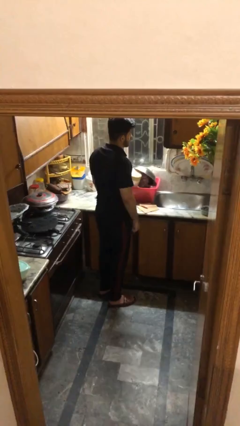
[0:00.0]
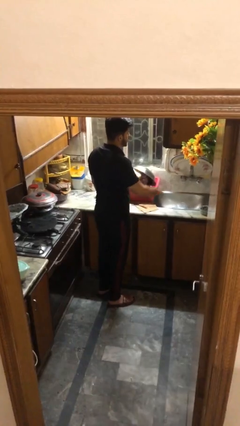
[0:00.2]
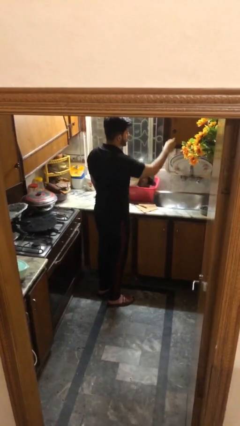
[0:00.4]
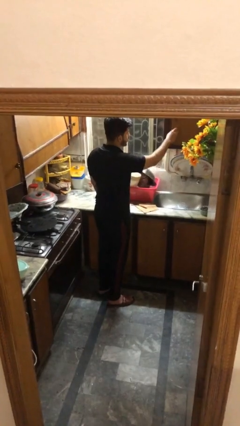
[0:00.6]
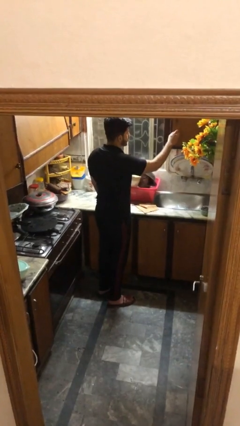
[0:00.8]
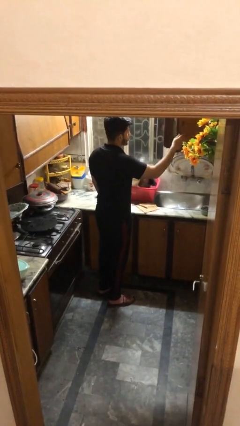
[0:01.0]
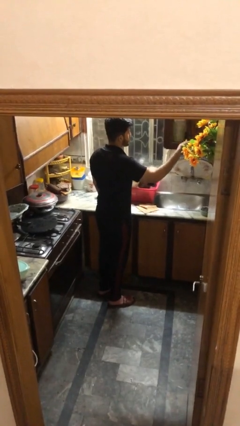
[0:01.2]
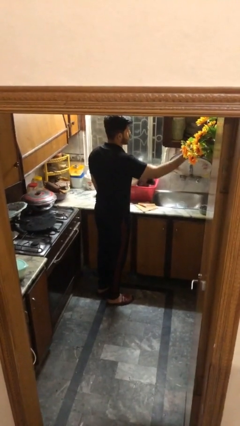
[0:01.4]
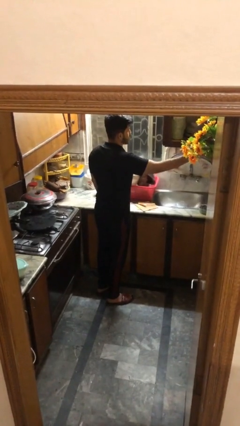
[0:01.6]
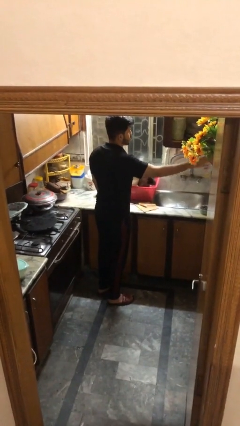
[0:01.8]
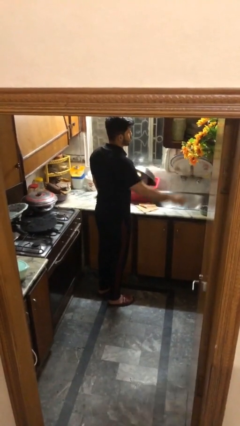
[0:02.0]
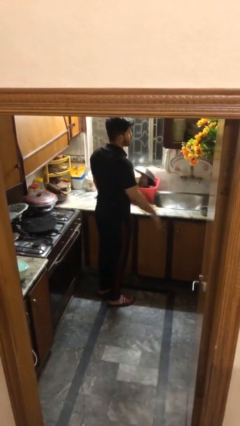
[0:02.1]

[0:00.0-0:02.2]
person opens kitchen drawer

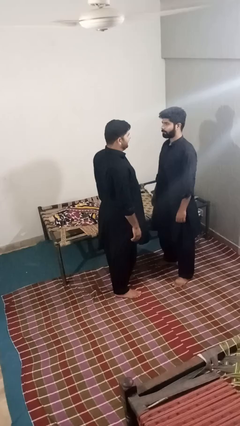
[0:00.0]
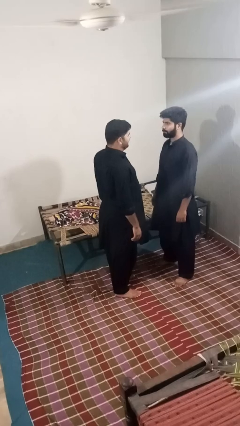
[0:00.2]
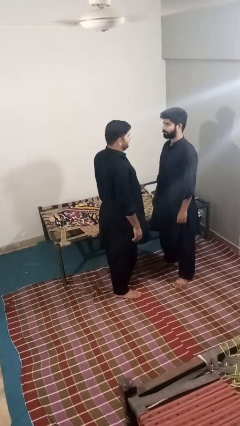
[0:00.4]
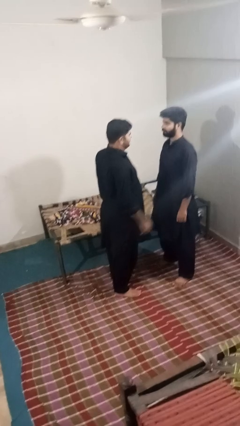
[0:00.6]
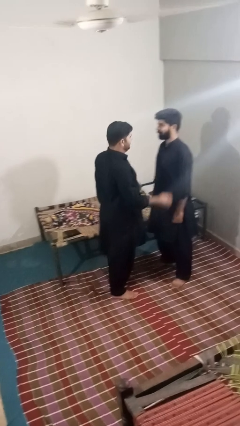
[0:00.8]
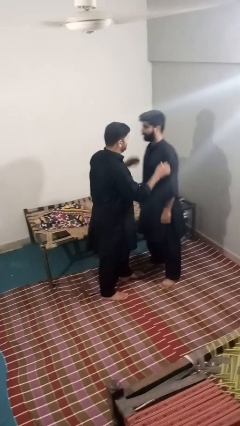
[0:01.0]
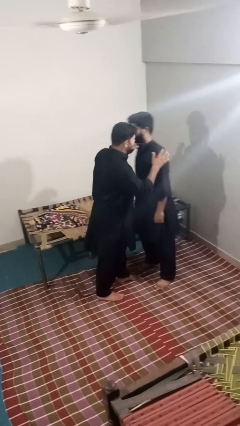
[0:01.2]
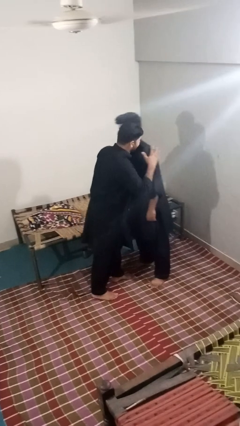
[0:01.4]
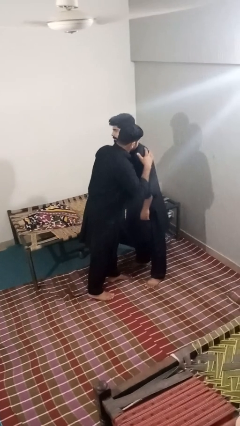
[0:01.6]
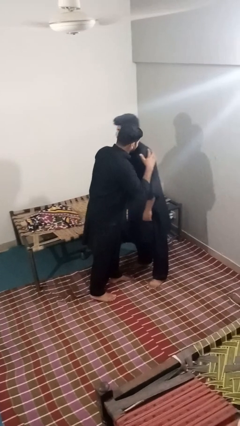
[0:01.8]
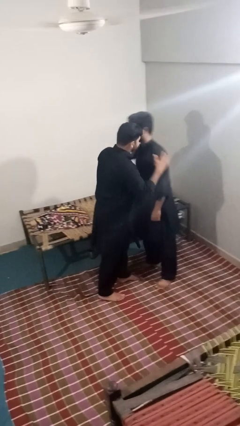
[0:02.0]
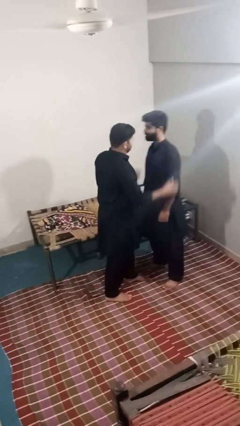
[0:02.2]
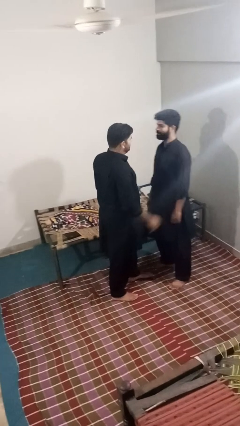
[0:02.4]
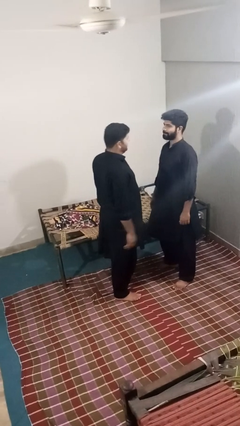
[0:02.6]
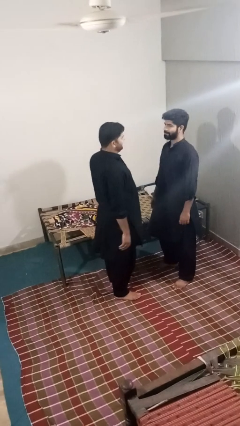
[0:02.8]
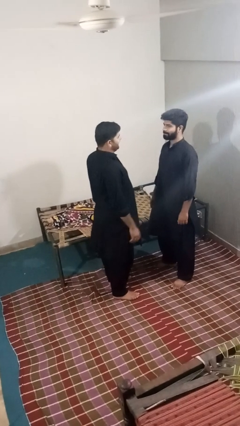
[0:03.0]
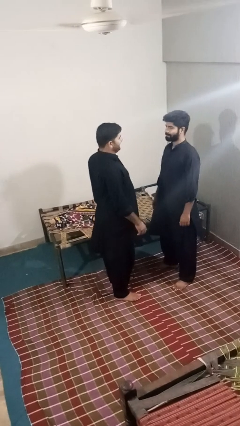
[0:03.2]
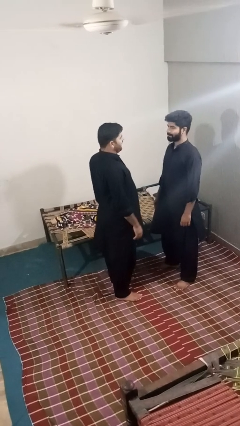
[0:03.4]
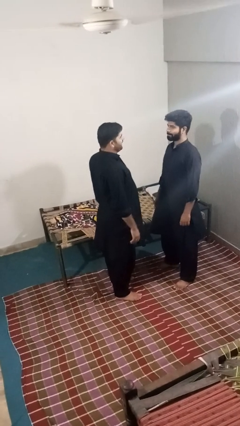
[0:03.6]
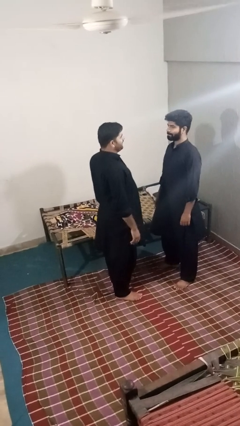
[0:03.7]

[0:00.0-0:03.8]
person kisses cheek of person

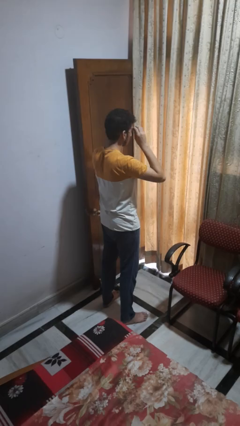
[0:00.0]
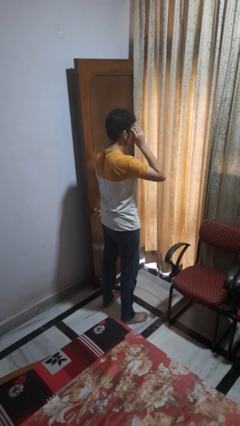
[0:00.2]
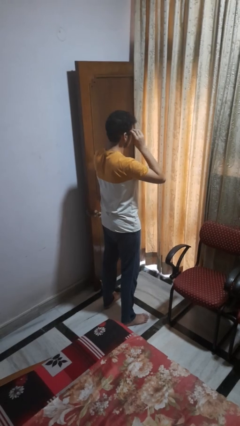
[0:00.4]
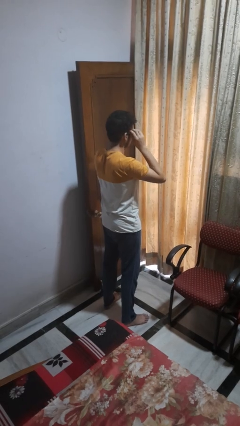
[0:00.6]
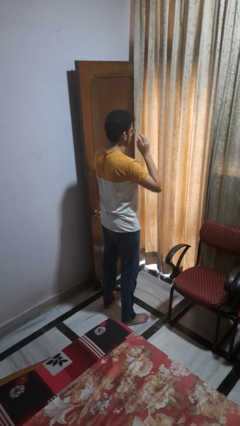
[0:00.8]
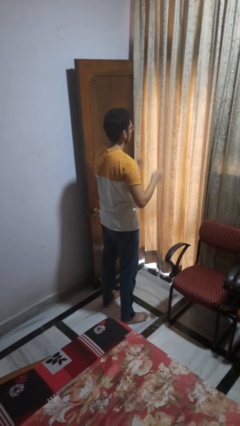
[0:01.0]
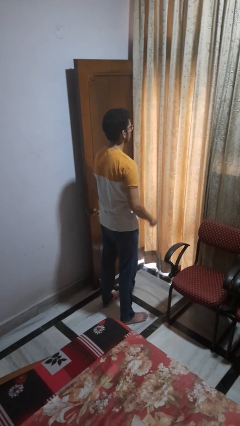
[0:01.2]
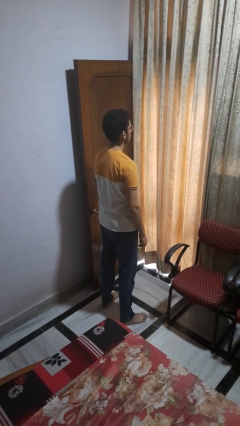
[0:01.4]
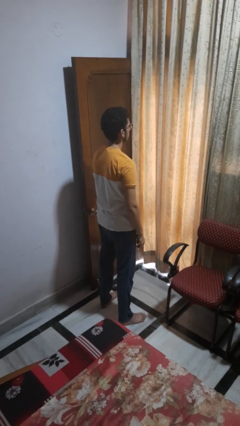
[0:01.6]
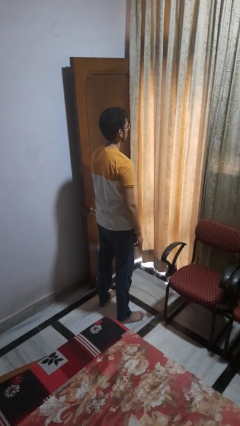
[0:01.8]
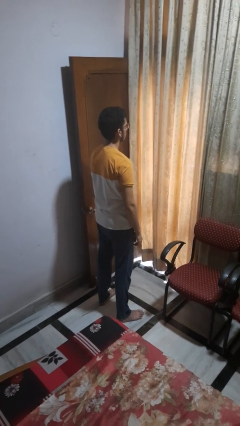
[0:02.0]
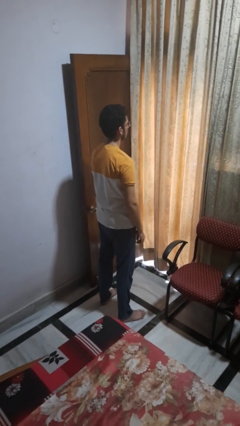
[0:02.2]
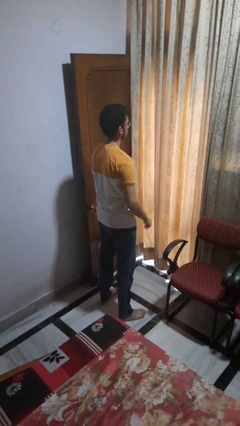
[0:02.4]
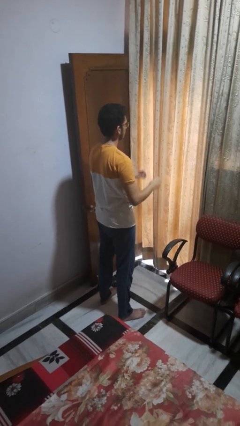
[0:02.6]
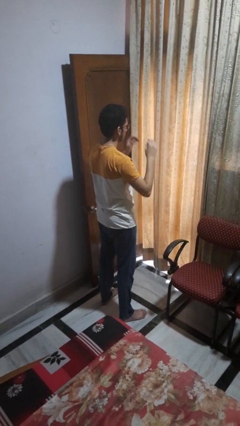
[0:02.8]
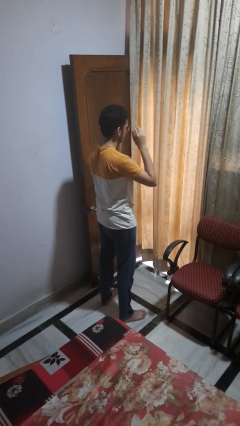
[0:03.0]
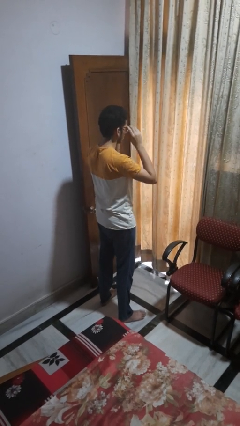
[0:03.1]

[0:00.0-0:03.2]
person puts on glasses

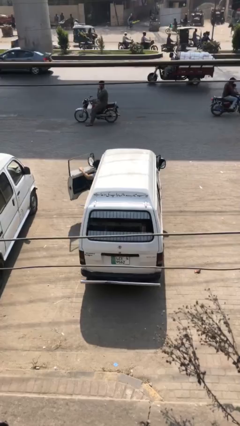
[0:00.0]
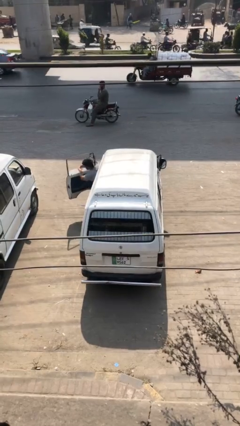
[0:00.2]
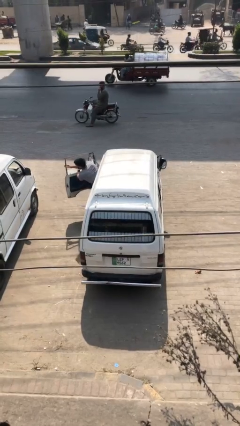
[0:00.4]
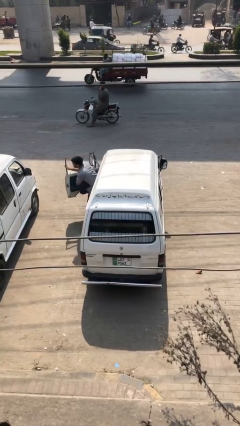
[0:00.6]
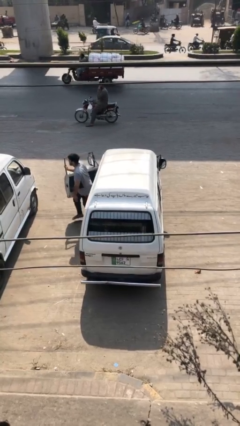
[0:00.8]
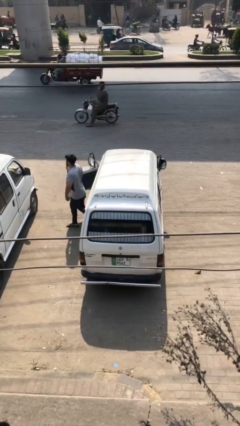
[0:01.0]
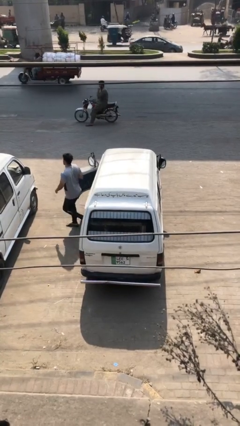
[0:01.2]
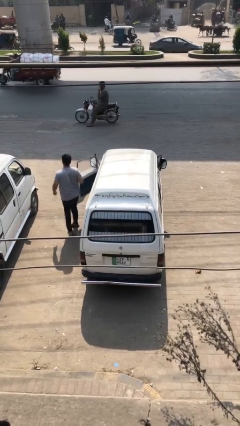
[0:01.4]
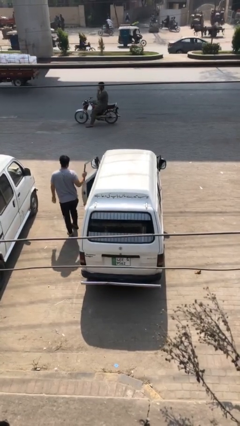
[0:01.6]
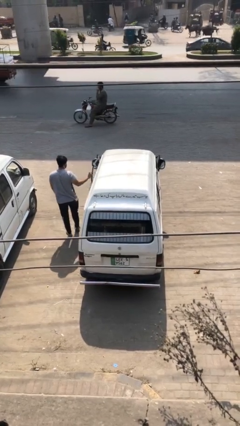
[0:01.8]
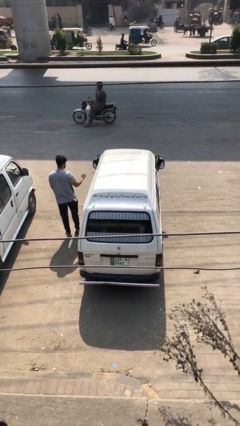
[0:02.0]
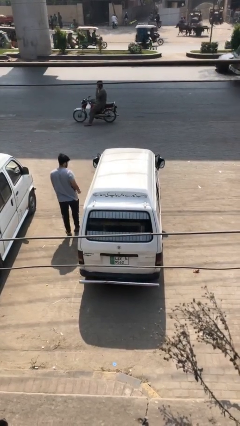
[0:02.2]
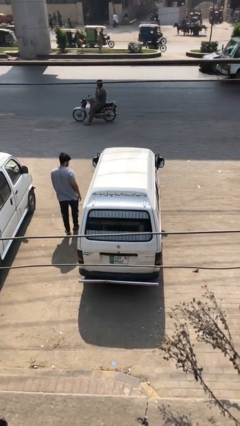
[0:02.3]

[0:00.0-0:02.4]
car drops off person

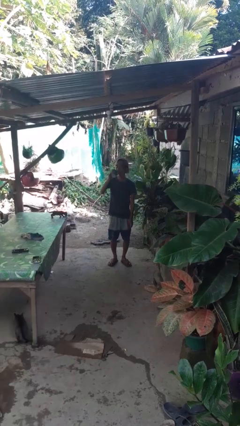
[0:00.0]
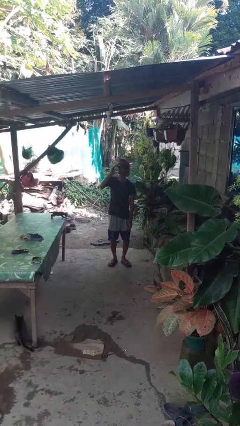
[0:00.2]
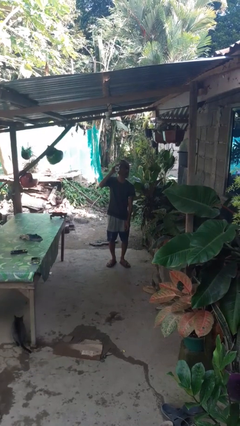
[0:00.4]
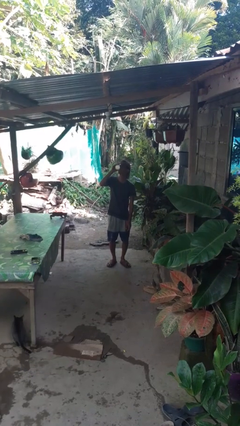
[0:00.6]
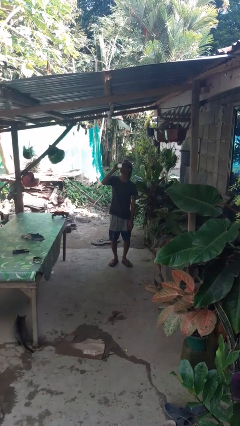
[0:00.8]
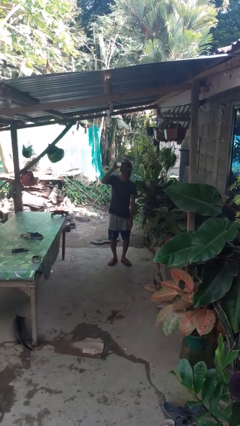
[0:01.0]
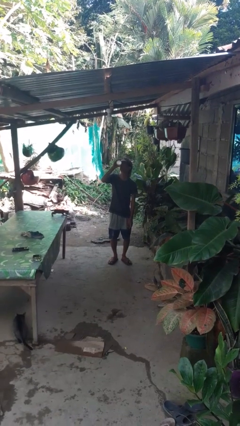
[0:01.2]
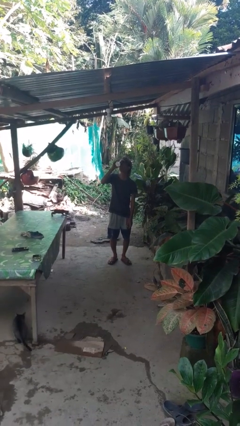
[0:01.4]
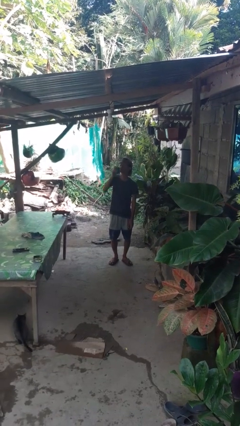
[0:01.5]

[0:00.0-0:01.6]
person drinks from beverage can

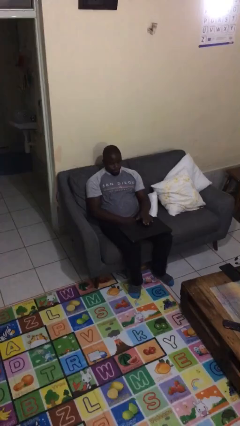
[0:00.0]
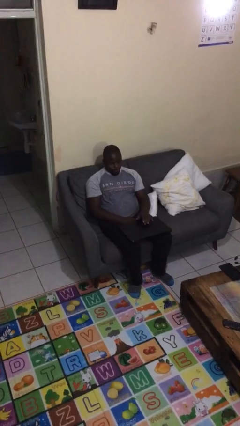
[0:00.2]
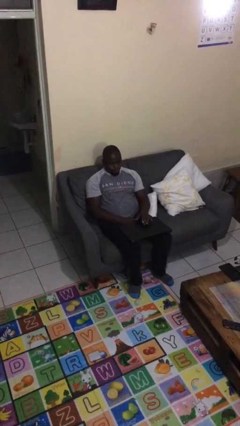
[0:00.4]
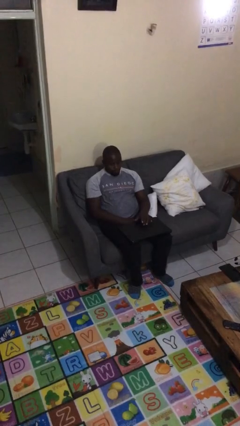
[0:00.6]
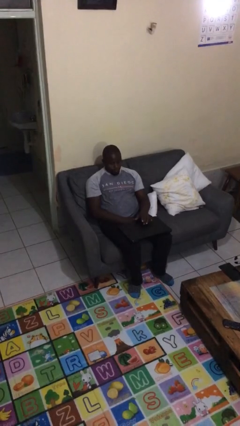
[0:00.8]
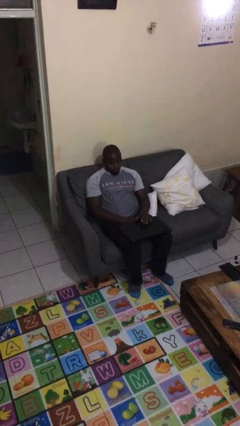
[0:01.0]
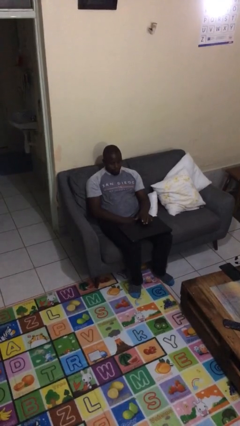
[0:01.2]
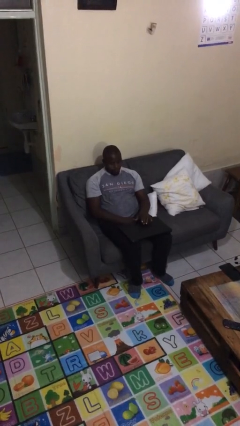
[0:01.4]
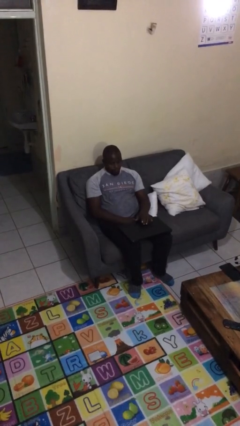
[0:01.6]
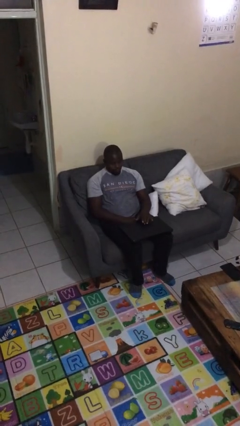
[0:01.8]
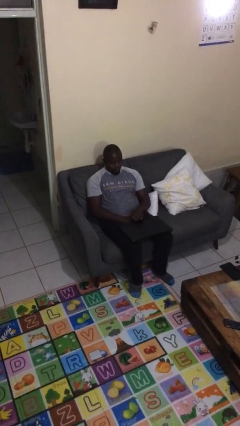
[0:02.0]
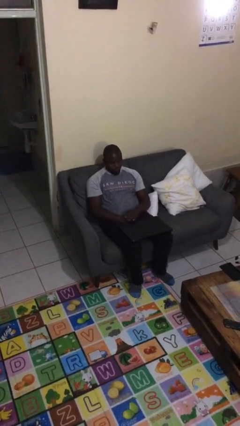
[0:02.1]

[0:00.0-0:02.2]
person taps object with finger

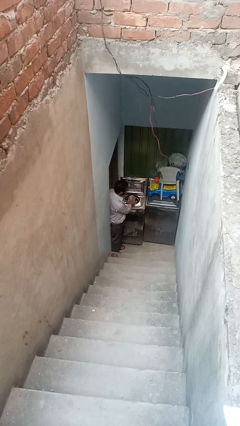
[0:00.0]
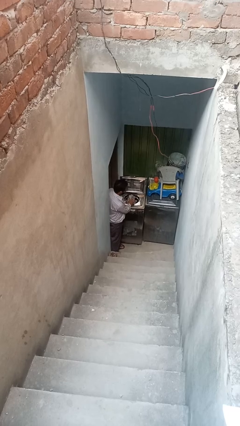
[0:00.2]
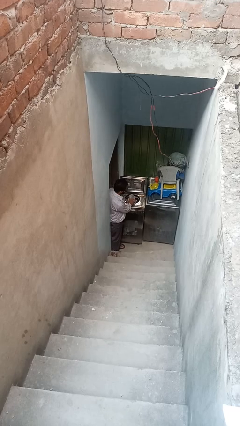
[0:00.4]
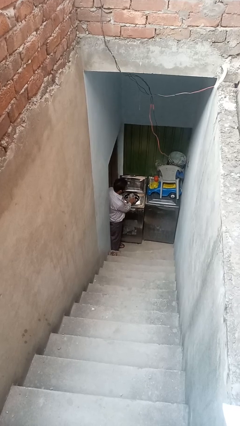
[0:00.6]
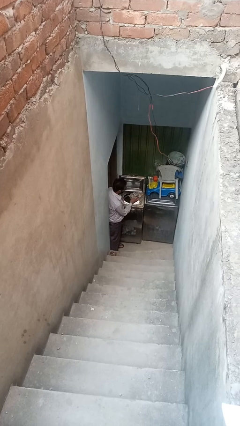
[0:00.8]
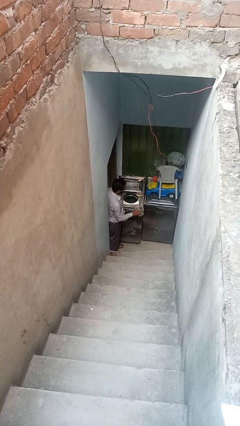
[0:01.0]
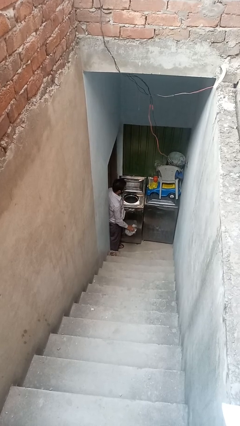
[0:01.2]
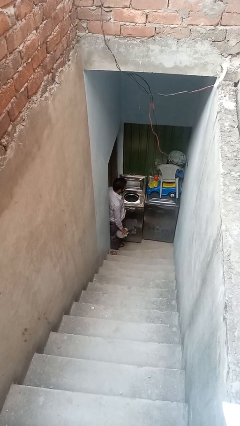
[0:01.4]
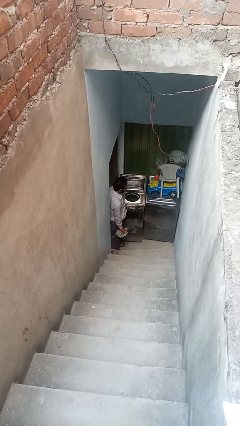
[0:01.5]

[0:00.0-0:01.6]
person unloads clotheswasher
